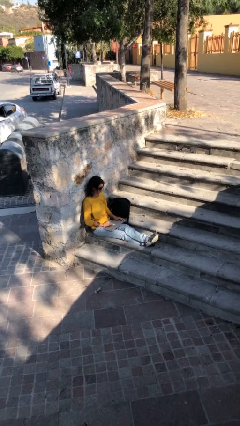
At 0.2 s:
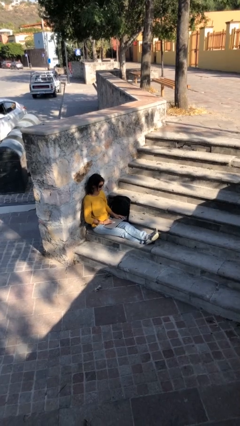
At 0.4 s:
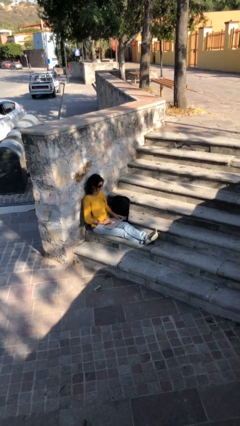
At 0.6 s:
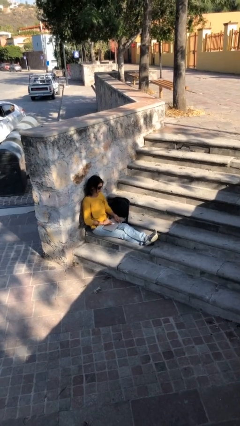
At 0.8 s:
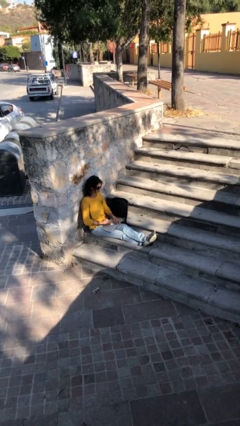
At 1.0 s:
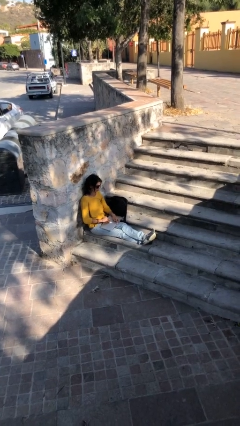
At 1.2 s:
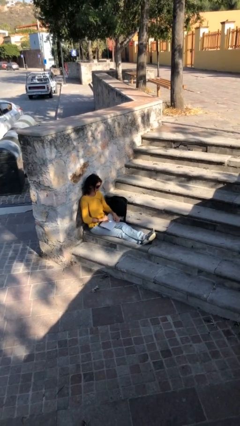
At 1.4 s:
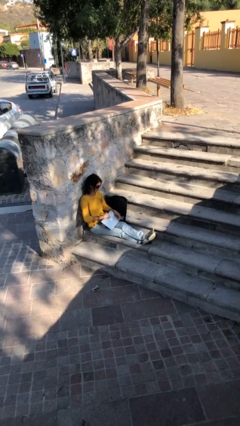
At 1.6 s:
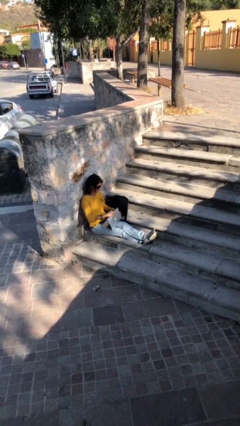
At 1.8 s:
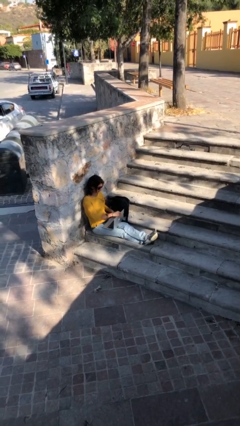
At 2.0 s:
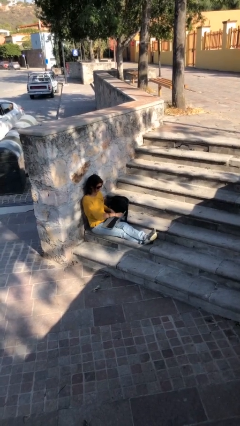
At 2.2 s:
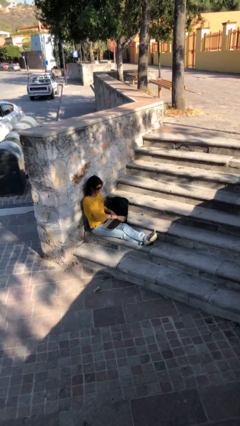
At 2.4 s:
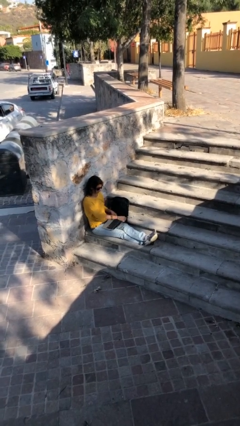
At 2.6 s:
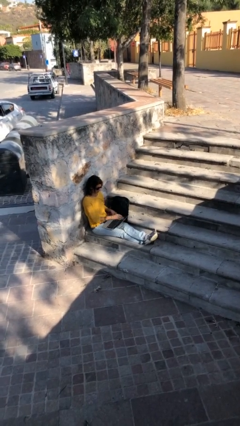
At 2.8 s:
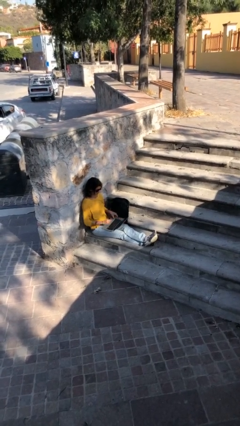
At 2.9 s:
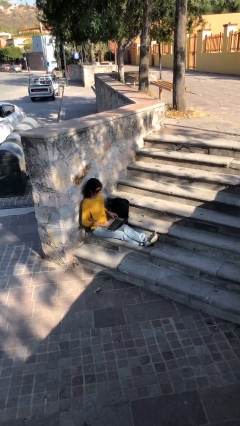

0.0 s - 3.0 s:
person interacts with laptop

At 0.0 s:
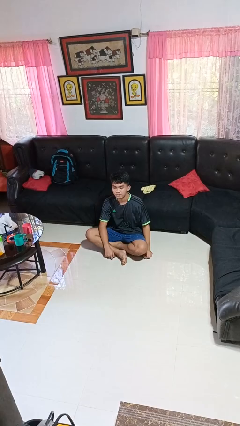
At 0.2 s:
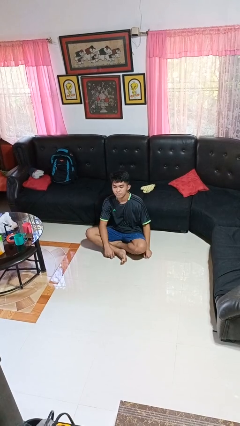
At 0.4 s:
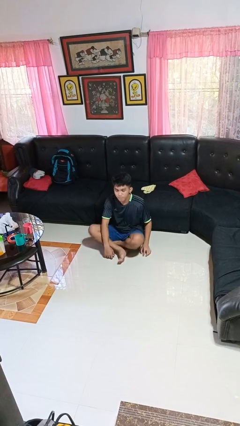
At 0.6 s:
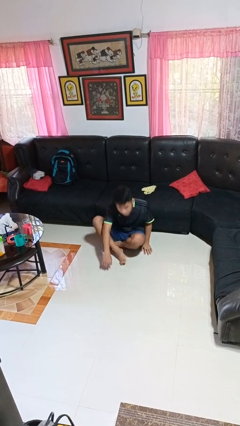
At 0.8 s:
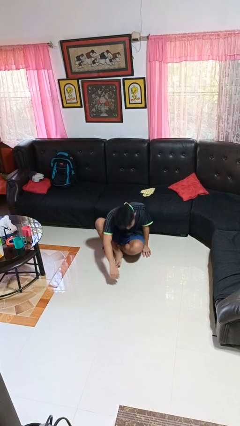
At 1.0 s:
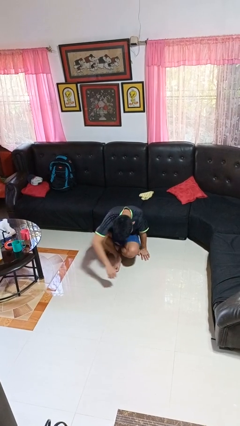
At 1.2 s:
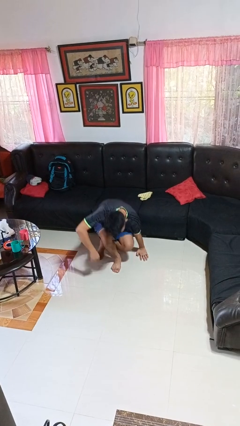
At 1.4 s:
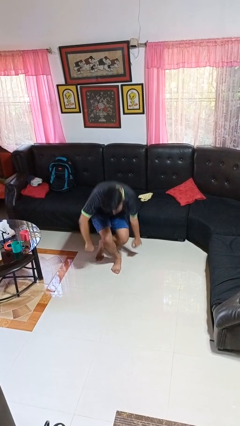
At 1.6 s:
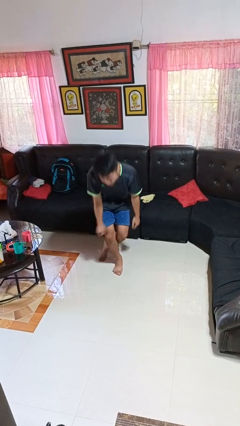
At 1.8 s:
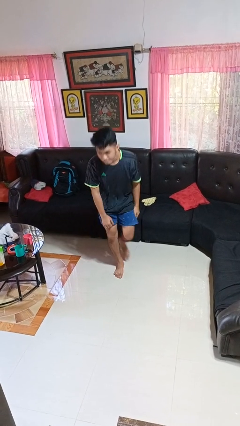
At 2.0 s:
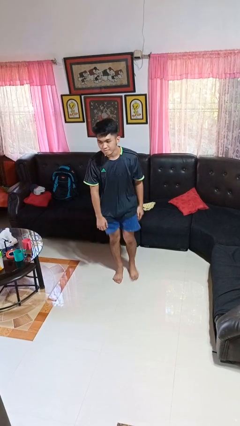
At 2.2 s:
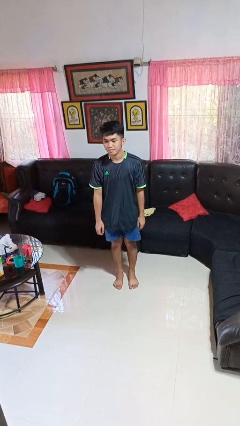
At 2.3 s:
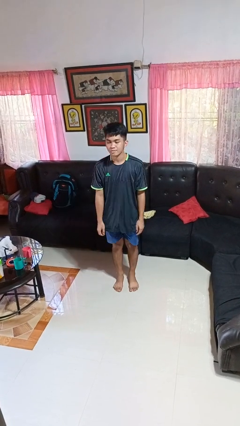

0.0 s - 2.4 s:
person stands up from floor

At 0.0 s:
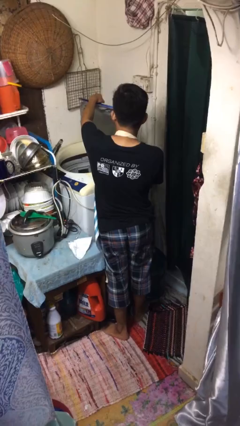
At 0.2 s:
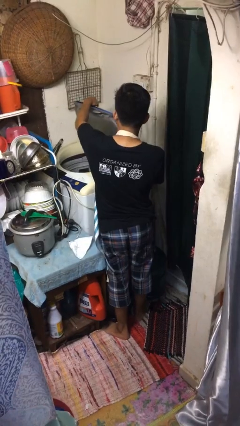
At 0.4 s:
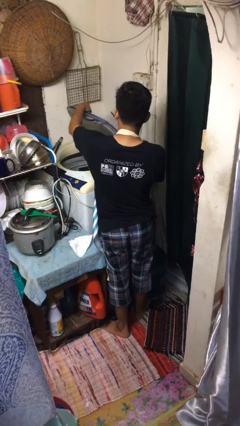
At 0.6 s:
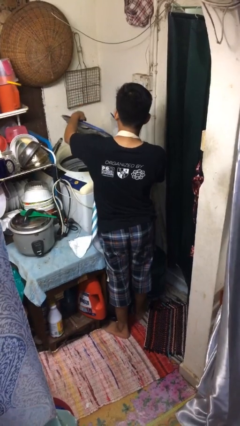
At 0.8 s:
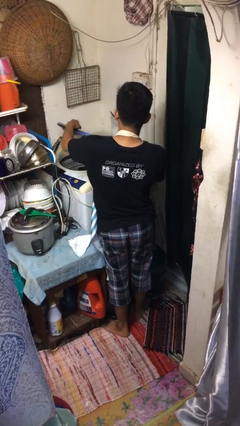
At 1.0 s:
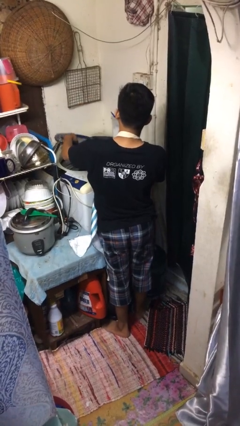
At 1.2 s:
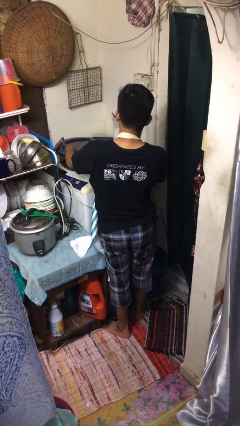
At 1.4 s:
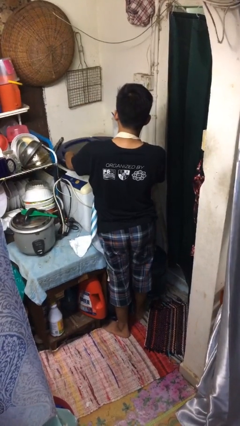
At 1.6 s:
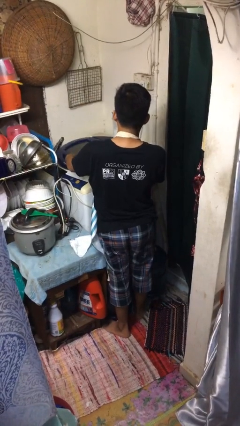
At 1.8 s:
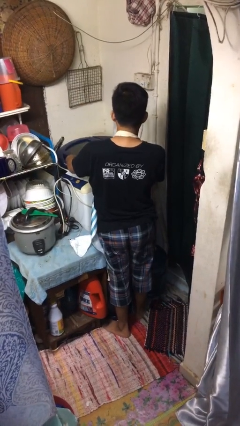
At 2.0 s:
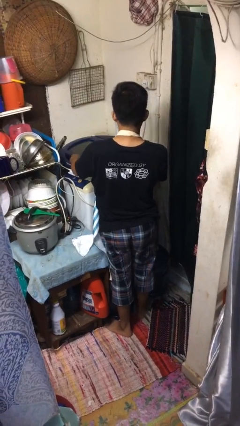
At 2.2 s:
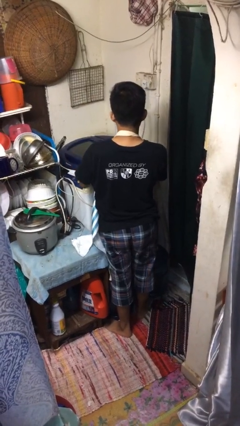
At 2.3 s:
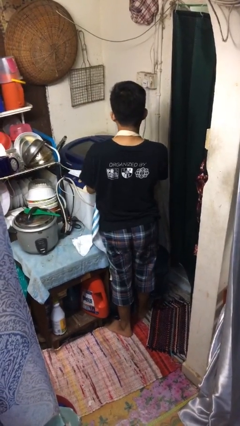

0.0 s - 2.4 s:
person closes clothes washer

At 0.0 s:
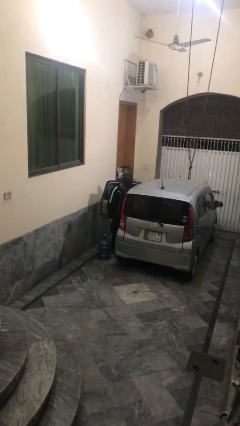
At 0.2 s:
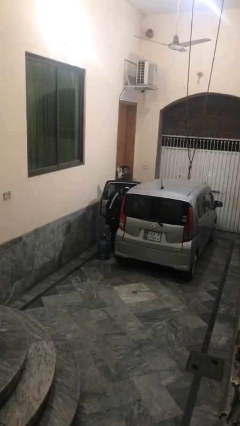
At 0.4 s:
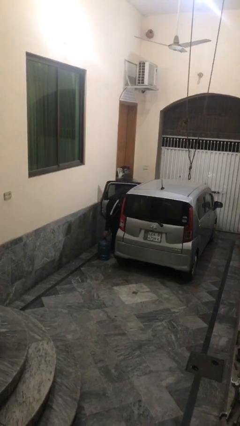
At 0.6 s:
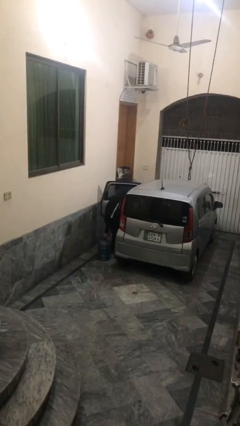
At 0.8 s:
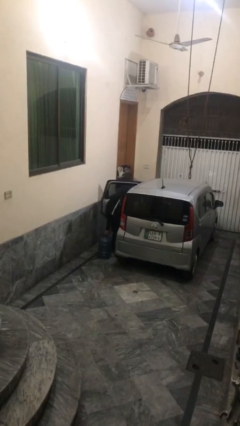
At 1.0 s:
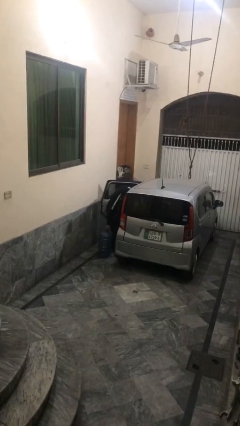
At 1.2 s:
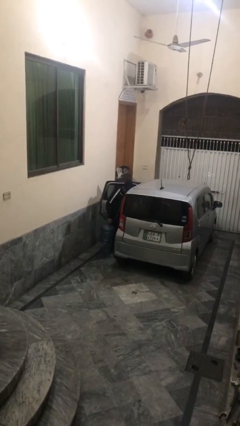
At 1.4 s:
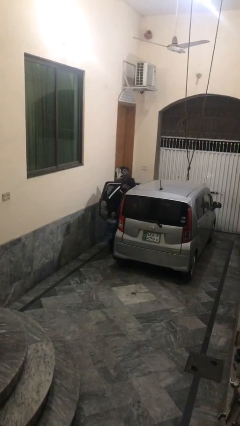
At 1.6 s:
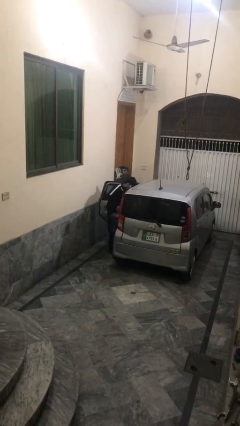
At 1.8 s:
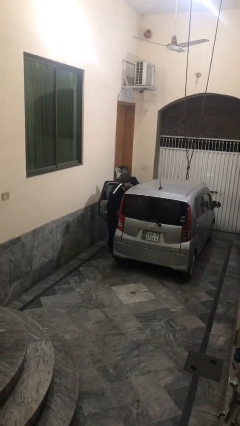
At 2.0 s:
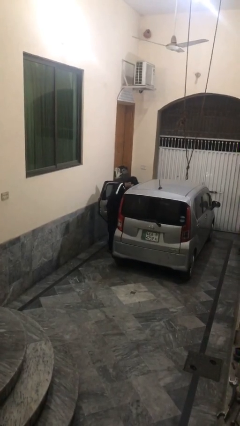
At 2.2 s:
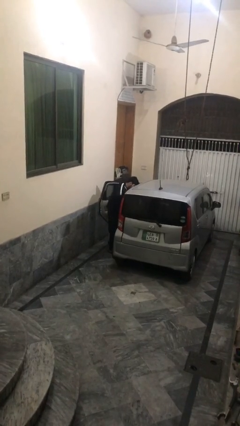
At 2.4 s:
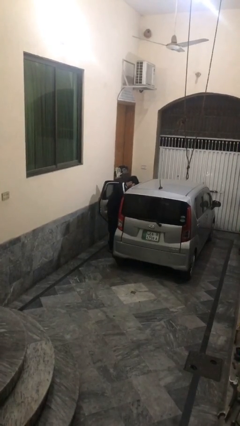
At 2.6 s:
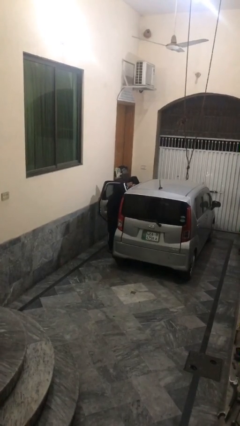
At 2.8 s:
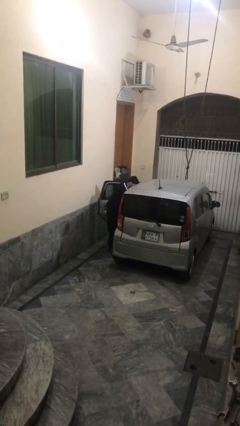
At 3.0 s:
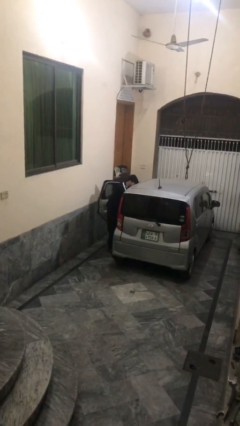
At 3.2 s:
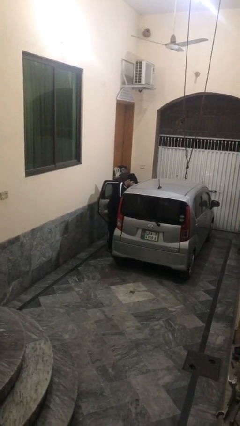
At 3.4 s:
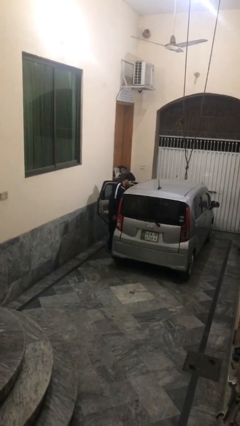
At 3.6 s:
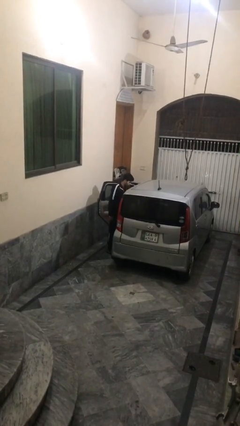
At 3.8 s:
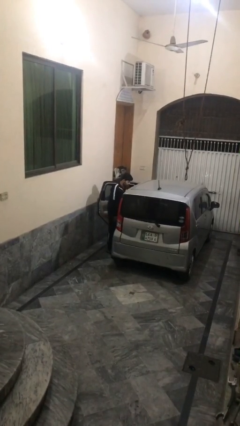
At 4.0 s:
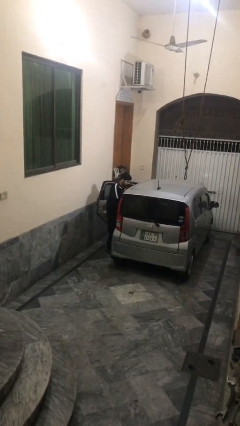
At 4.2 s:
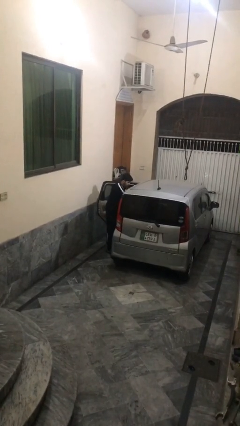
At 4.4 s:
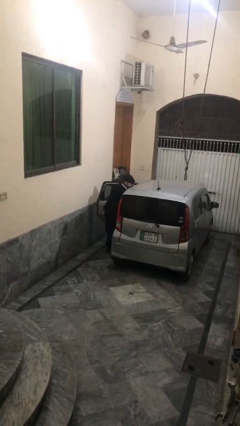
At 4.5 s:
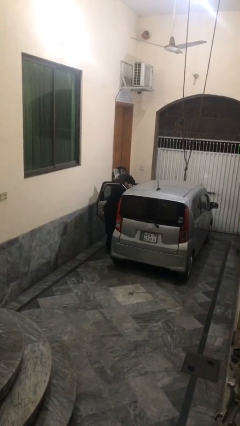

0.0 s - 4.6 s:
person loads car

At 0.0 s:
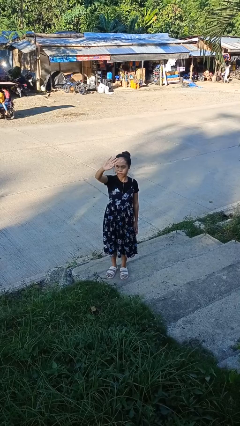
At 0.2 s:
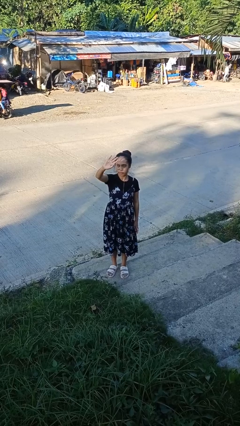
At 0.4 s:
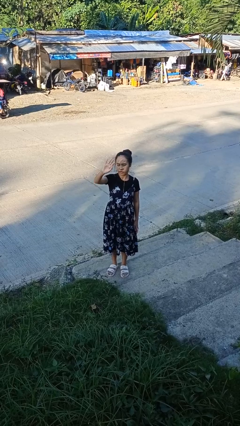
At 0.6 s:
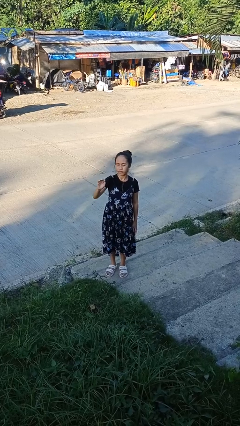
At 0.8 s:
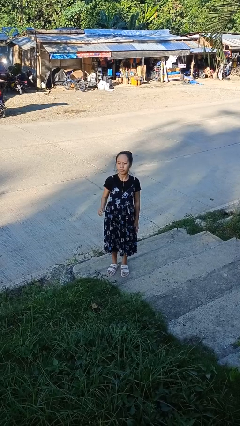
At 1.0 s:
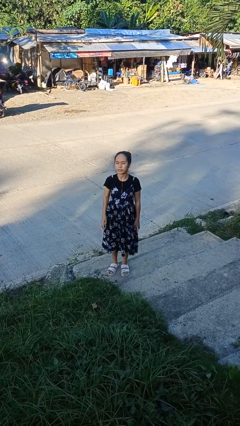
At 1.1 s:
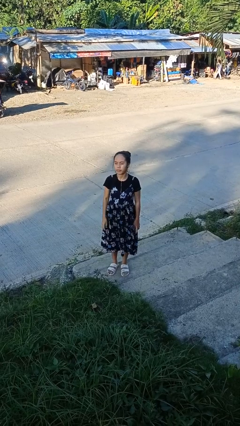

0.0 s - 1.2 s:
person shades eyes

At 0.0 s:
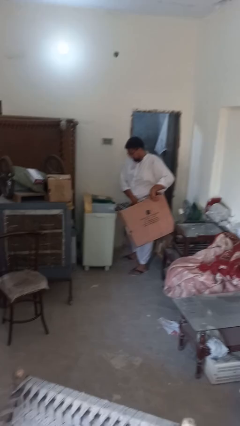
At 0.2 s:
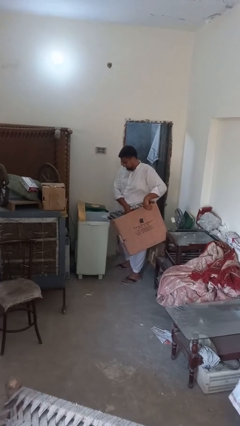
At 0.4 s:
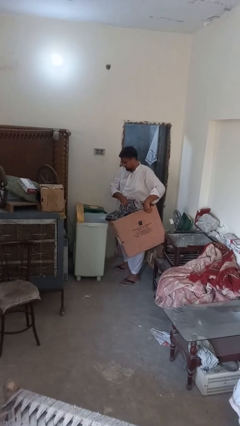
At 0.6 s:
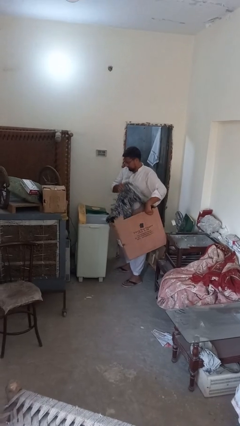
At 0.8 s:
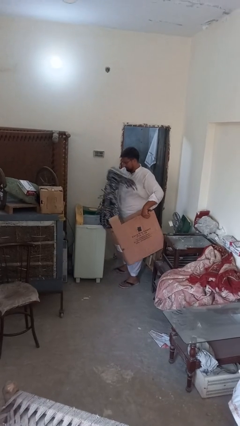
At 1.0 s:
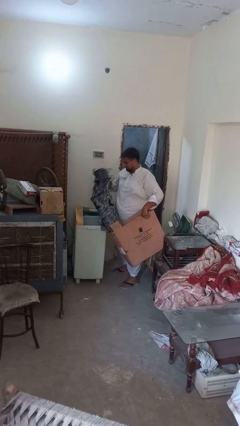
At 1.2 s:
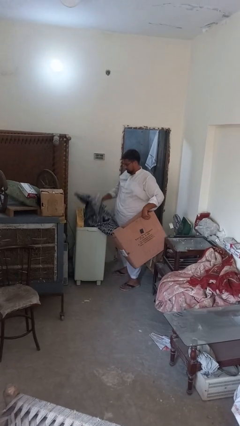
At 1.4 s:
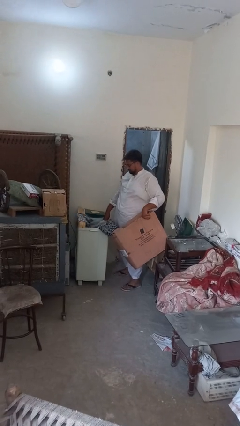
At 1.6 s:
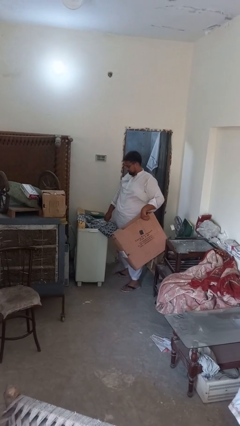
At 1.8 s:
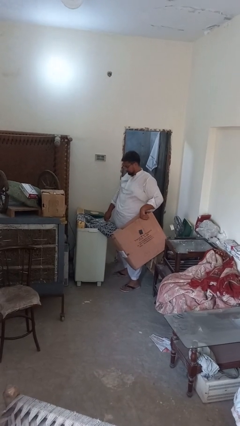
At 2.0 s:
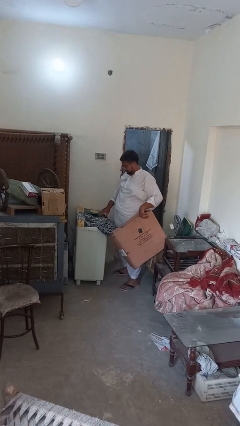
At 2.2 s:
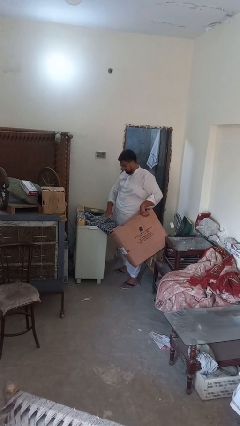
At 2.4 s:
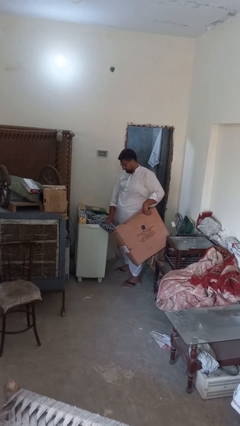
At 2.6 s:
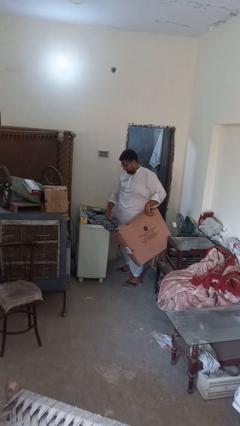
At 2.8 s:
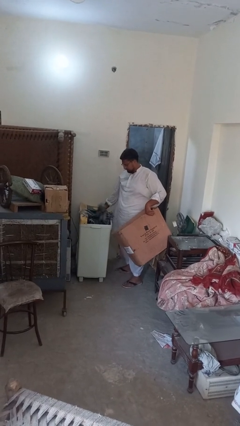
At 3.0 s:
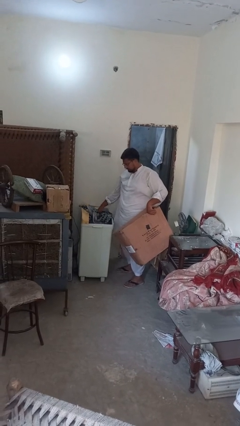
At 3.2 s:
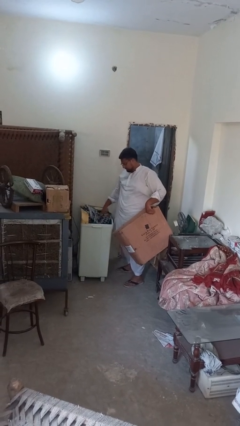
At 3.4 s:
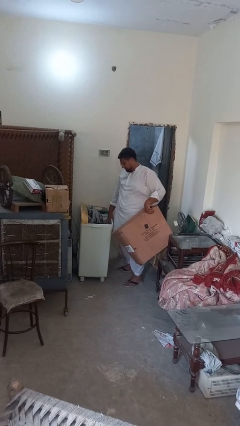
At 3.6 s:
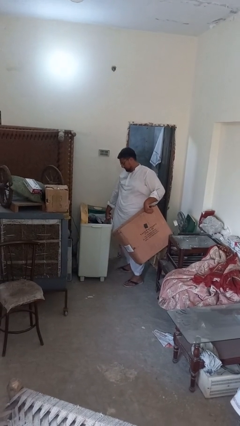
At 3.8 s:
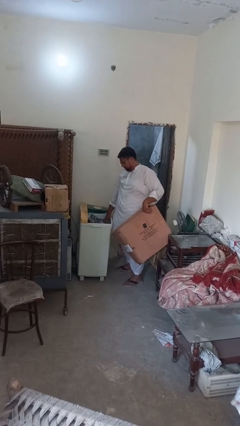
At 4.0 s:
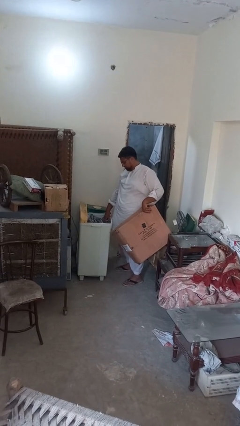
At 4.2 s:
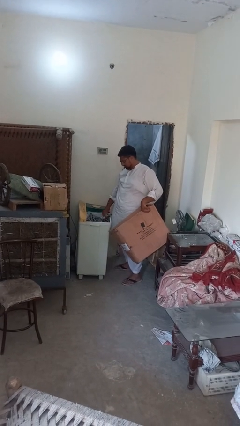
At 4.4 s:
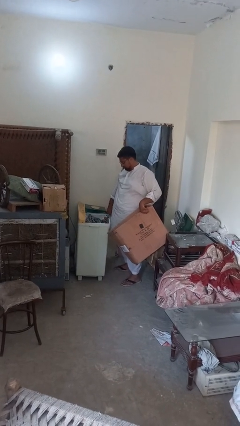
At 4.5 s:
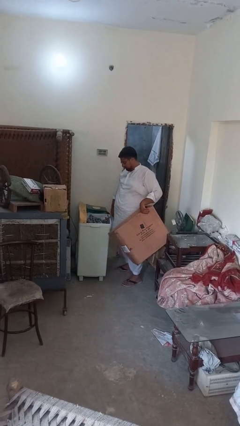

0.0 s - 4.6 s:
person loads dryer
